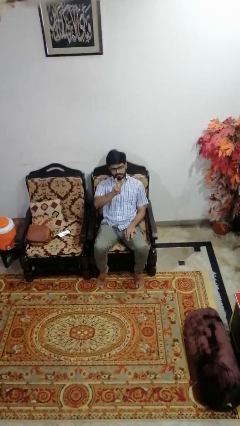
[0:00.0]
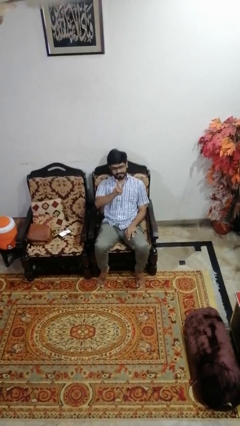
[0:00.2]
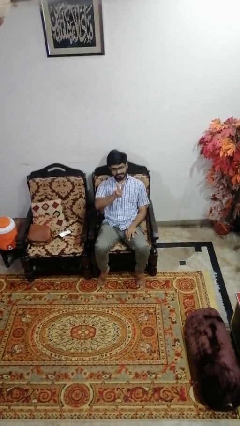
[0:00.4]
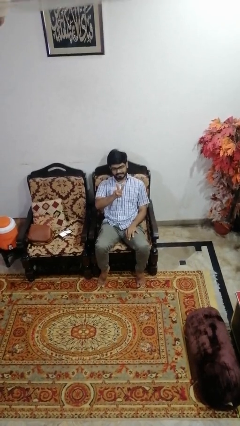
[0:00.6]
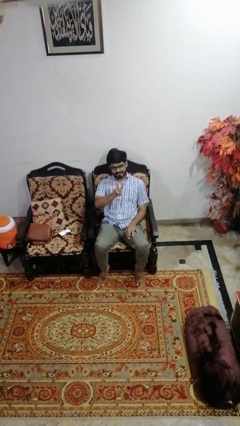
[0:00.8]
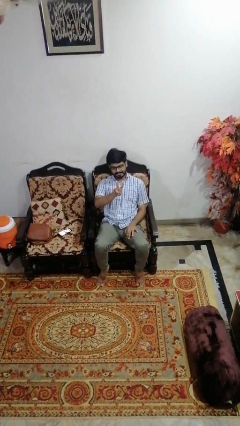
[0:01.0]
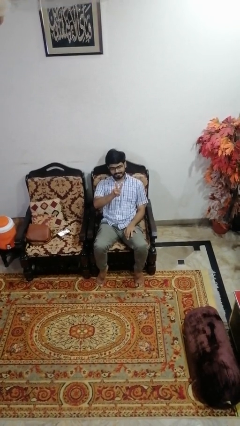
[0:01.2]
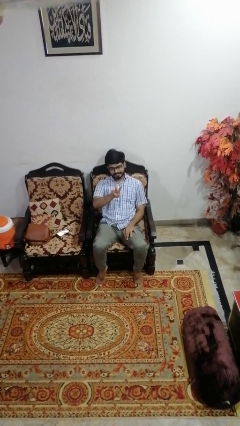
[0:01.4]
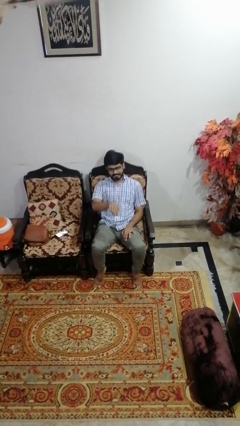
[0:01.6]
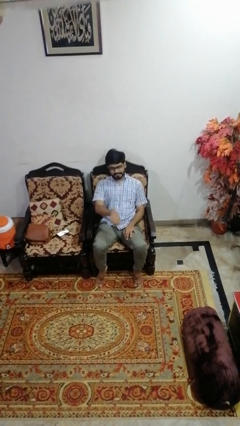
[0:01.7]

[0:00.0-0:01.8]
person gestures peace

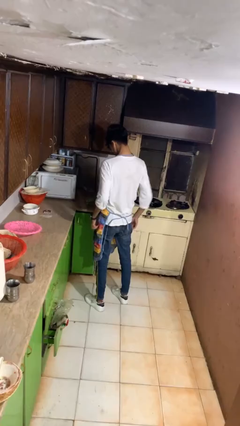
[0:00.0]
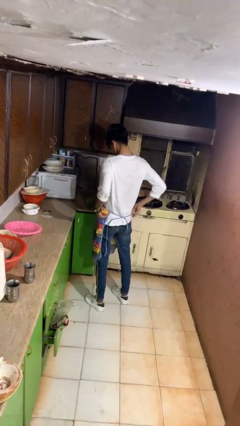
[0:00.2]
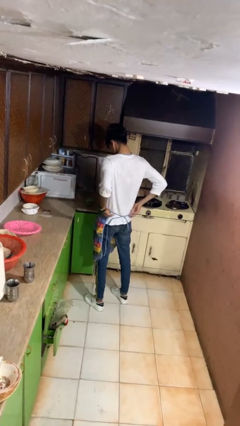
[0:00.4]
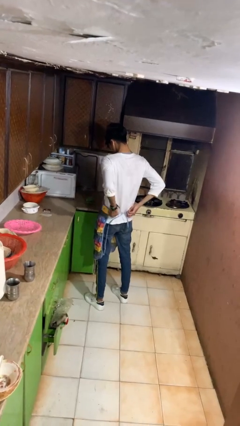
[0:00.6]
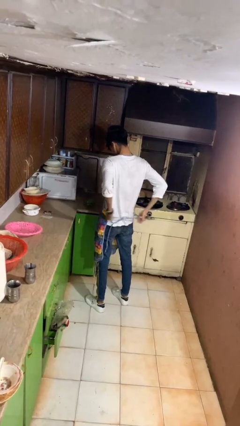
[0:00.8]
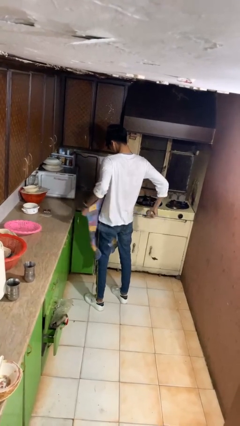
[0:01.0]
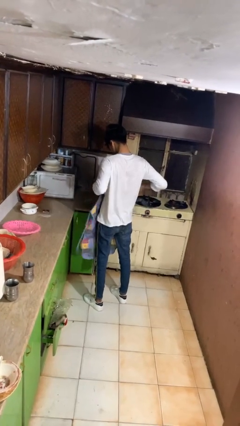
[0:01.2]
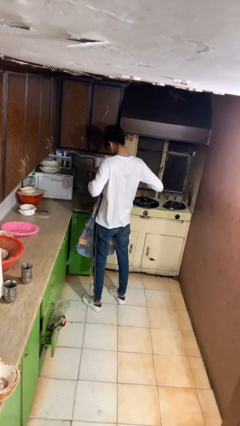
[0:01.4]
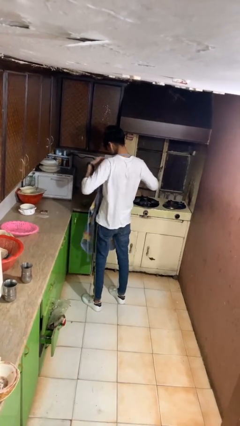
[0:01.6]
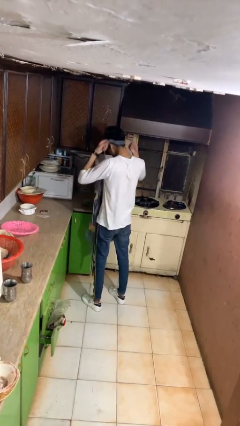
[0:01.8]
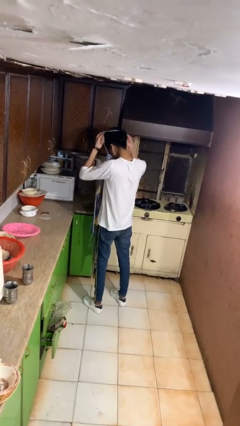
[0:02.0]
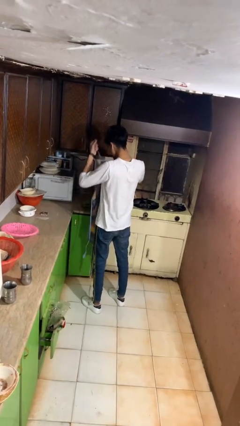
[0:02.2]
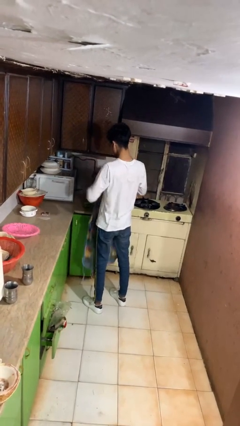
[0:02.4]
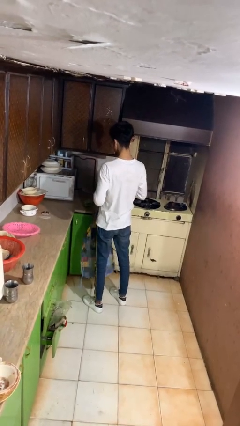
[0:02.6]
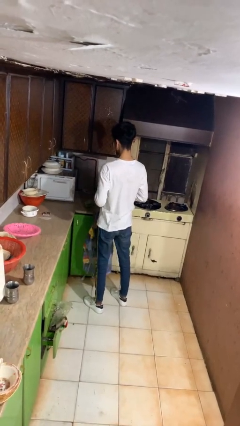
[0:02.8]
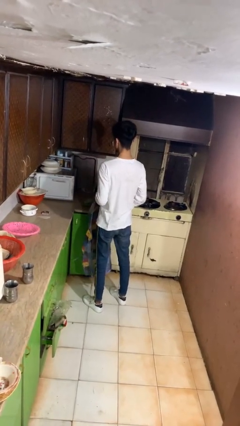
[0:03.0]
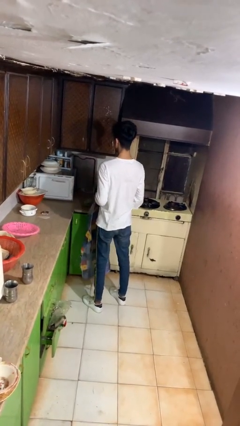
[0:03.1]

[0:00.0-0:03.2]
person takes off apron

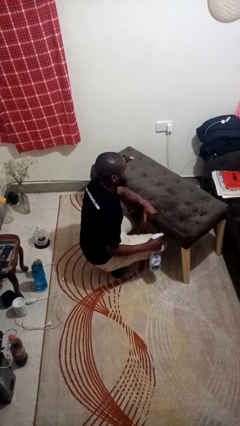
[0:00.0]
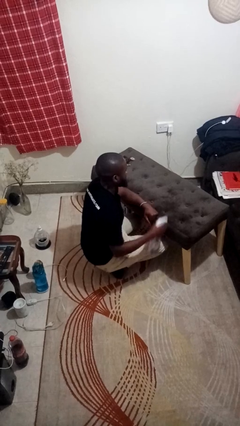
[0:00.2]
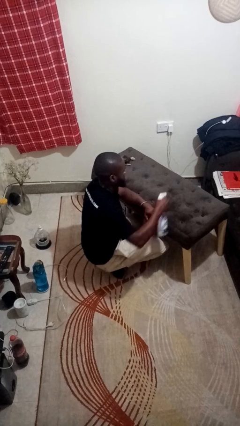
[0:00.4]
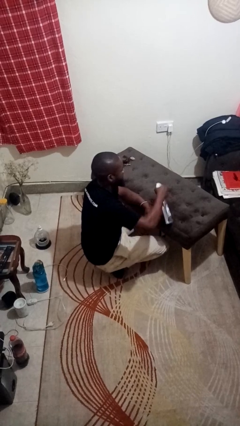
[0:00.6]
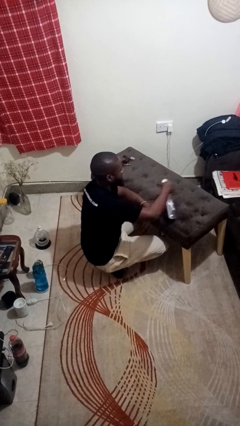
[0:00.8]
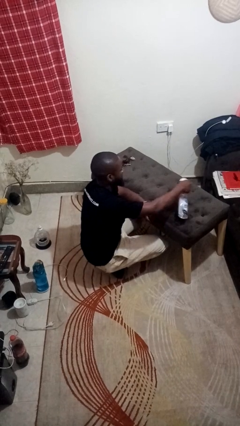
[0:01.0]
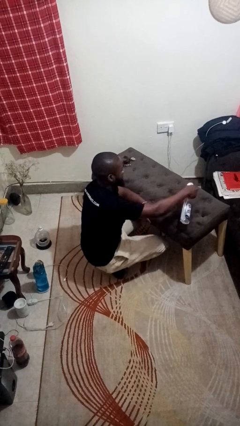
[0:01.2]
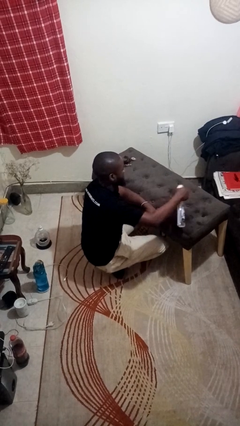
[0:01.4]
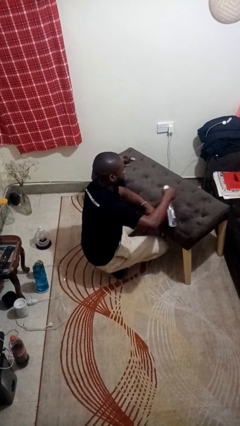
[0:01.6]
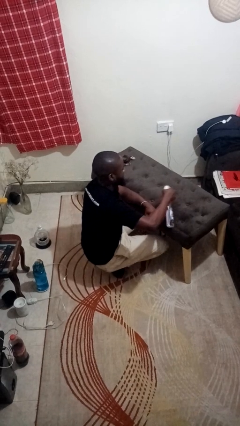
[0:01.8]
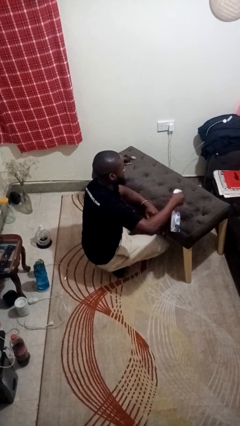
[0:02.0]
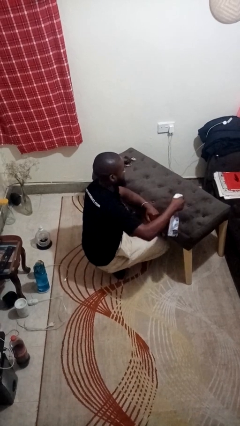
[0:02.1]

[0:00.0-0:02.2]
person sprays from bottle

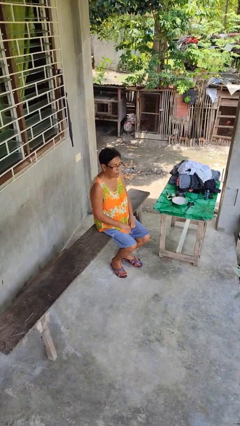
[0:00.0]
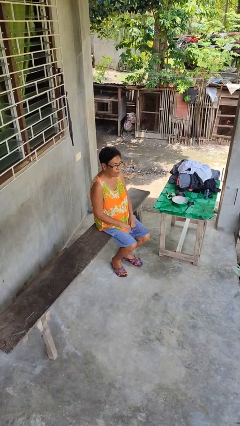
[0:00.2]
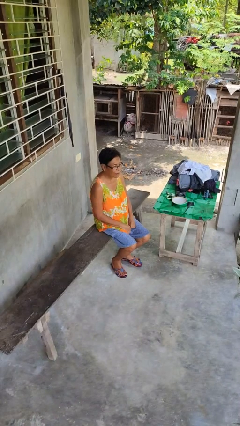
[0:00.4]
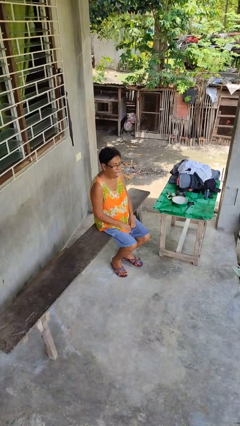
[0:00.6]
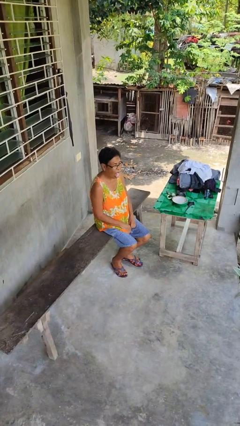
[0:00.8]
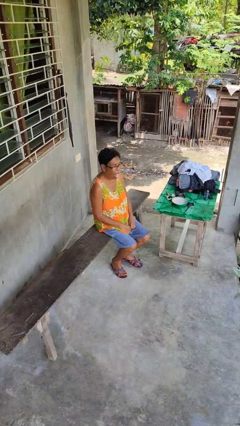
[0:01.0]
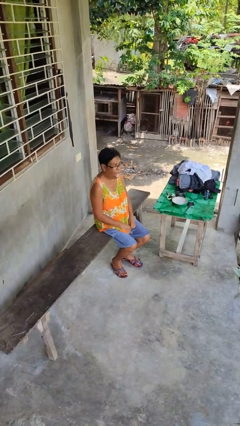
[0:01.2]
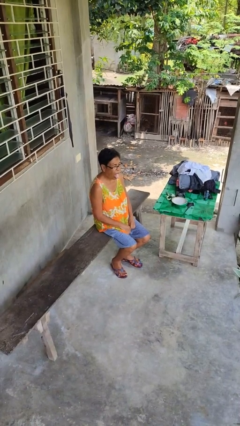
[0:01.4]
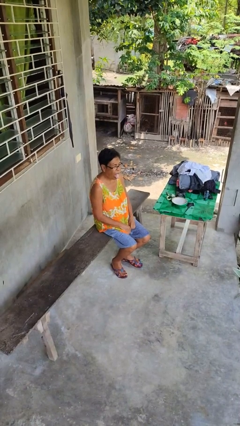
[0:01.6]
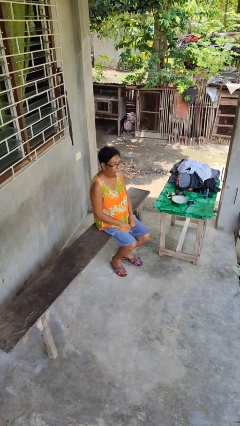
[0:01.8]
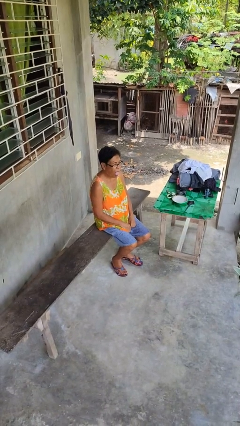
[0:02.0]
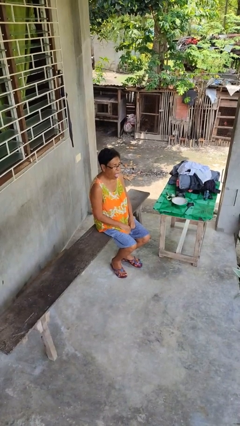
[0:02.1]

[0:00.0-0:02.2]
person sticks out tongue

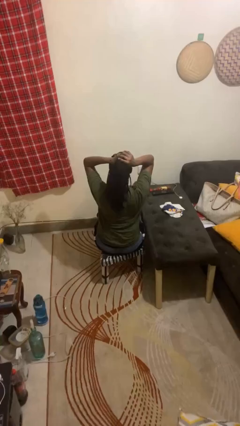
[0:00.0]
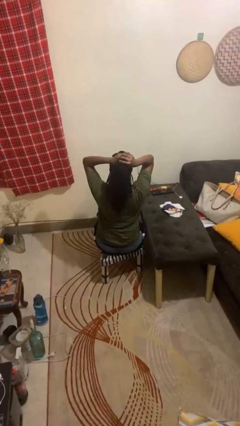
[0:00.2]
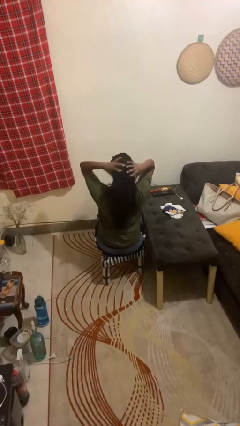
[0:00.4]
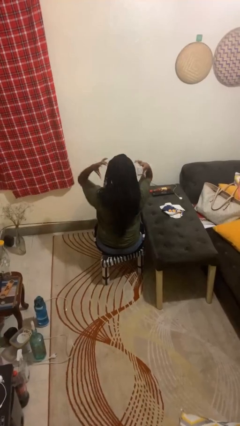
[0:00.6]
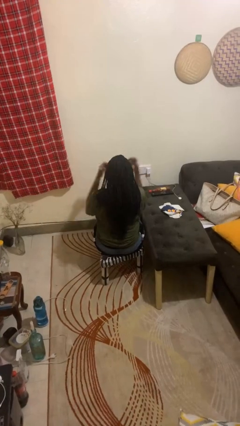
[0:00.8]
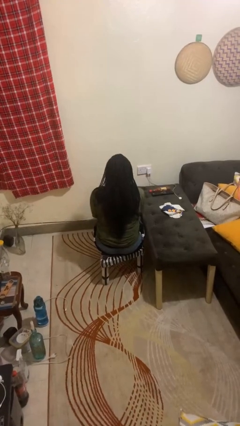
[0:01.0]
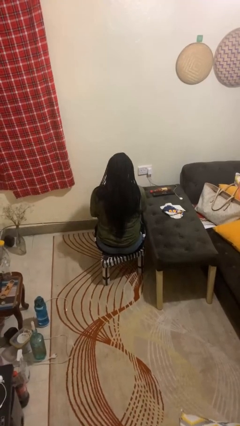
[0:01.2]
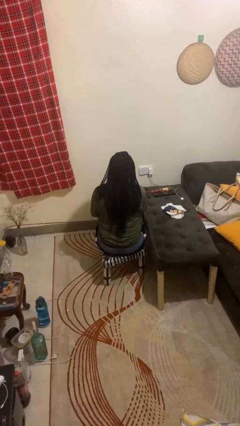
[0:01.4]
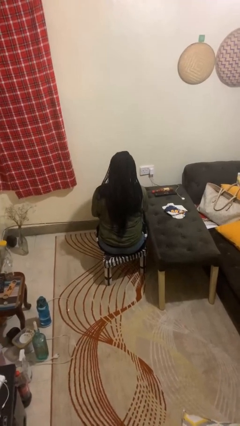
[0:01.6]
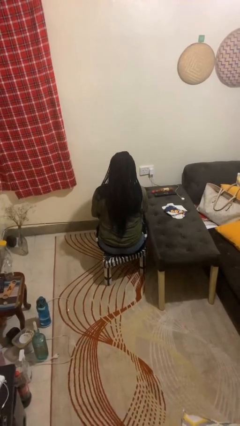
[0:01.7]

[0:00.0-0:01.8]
person takes off hairtie

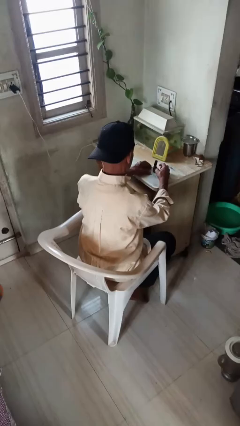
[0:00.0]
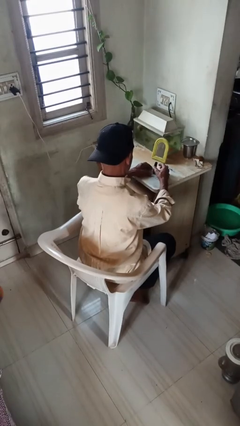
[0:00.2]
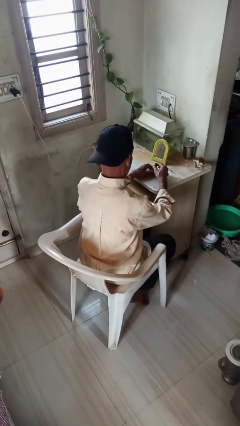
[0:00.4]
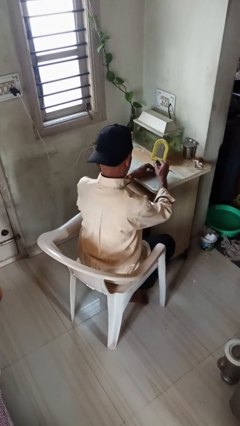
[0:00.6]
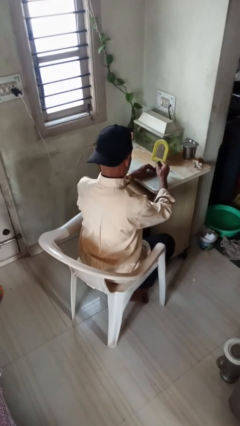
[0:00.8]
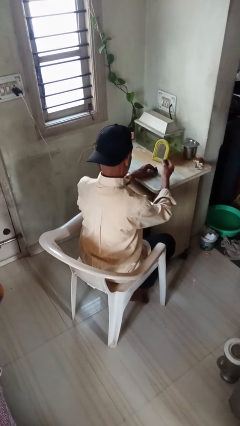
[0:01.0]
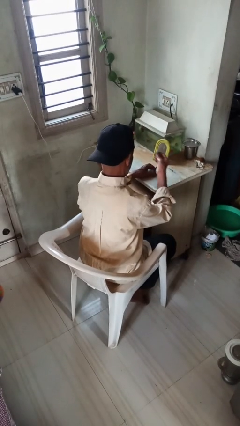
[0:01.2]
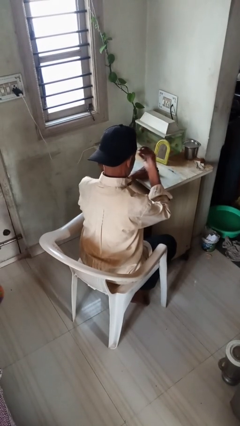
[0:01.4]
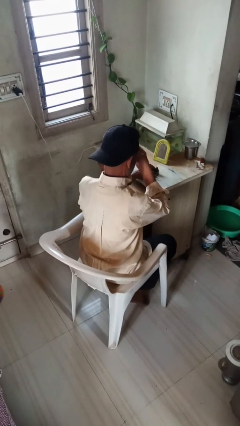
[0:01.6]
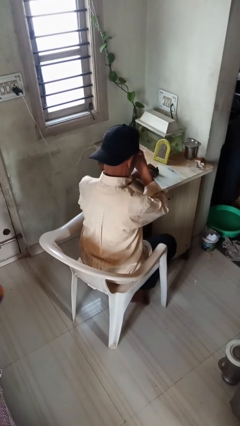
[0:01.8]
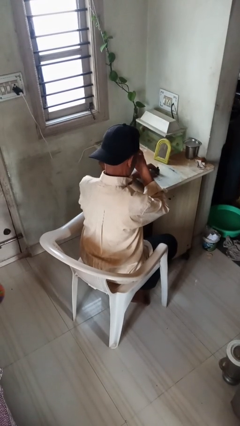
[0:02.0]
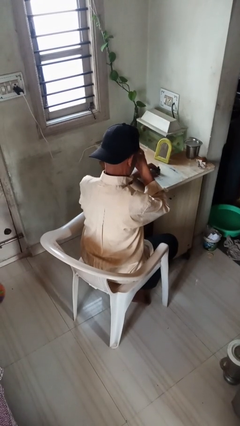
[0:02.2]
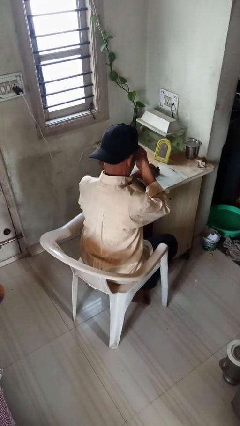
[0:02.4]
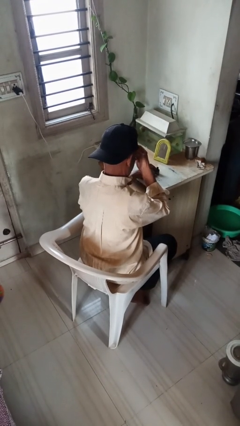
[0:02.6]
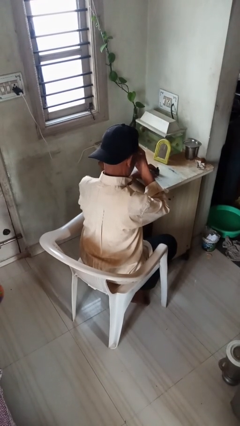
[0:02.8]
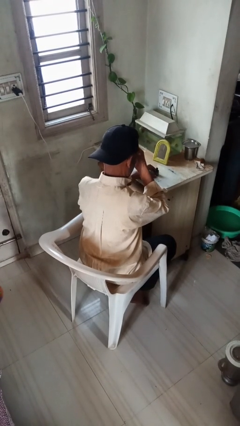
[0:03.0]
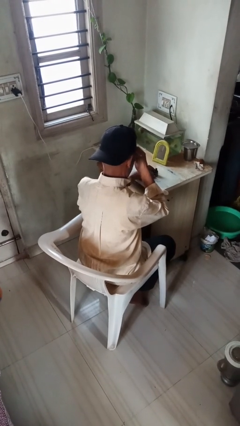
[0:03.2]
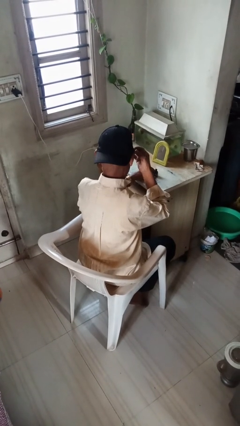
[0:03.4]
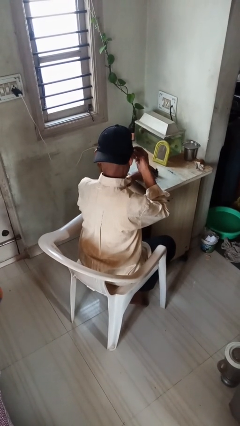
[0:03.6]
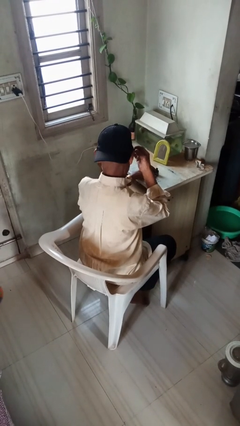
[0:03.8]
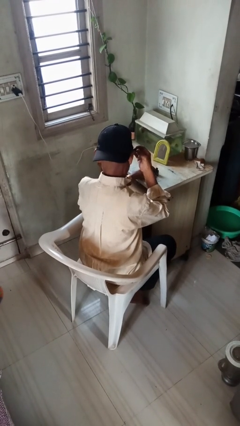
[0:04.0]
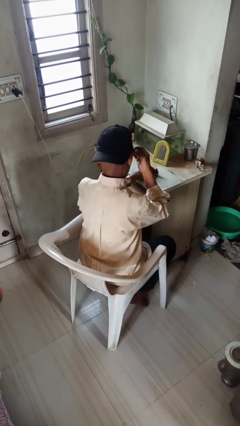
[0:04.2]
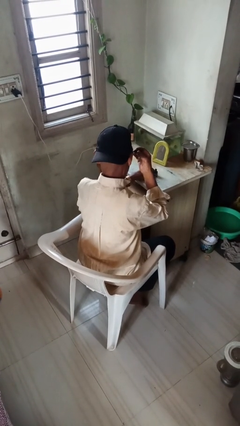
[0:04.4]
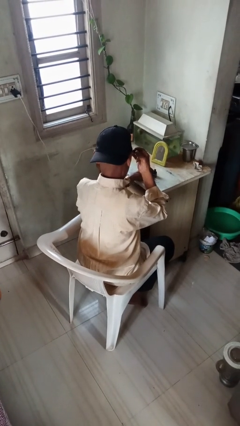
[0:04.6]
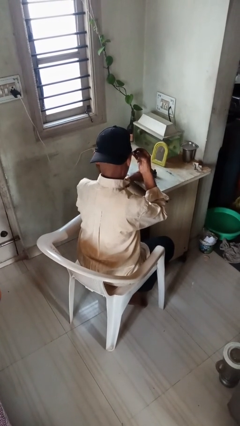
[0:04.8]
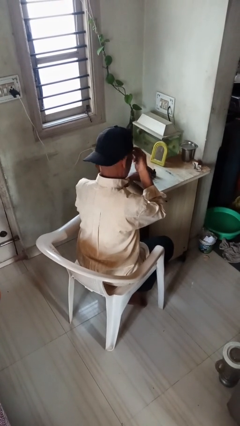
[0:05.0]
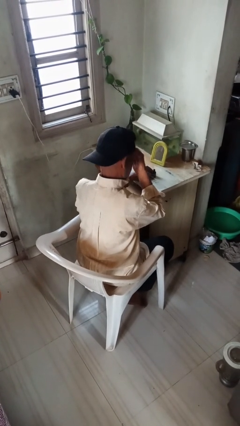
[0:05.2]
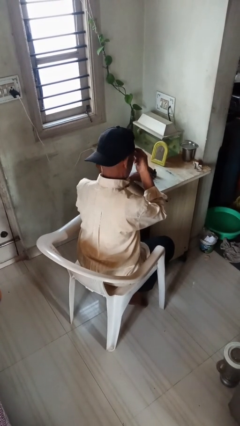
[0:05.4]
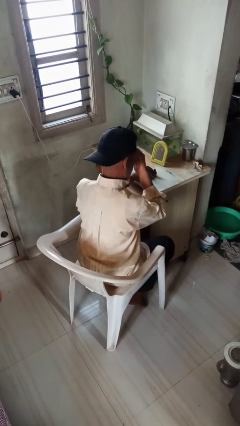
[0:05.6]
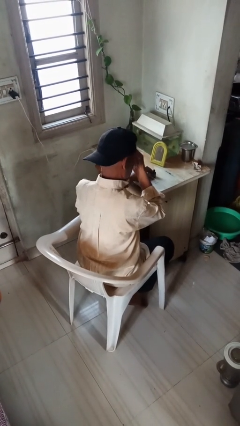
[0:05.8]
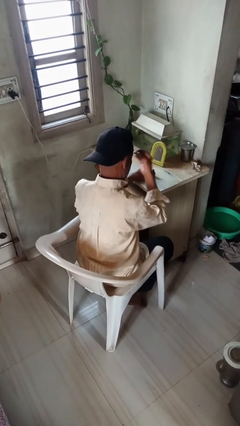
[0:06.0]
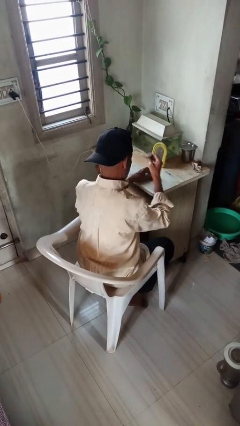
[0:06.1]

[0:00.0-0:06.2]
person applies eye makeup

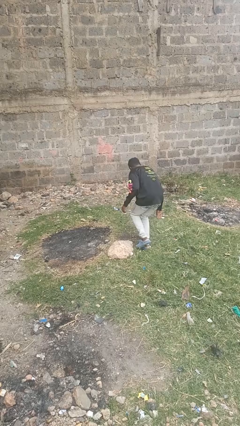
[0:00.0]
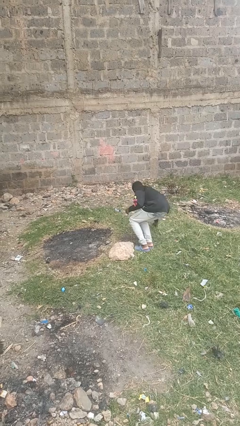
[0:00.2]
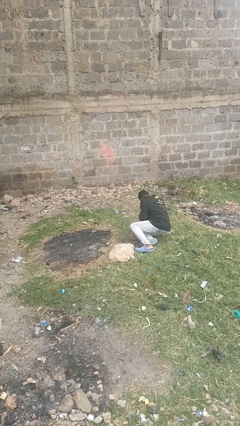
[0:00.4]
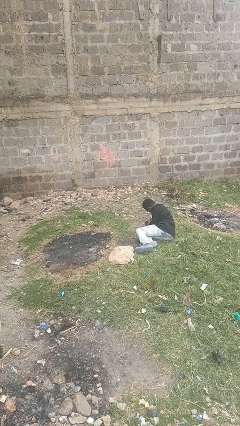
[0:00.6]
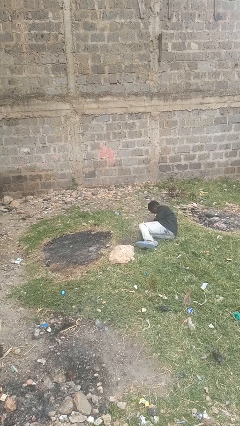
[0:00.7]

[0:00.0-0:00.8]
person trips on object on floor
